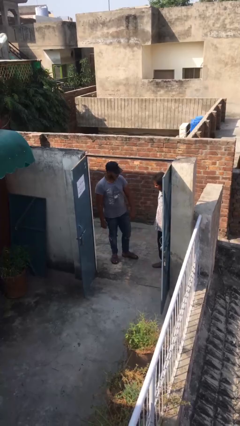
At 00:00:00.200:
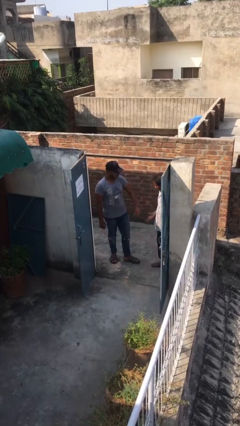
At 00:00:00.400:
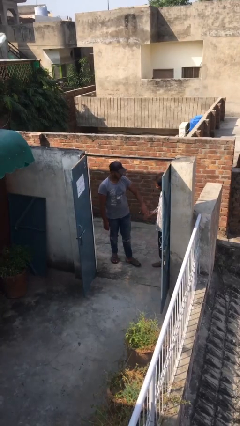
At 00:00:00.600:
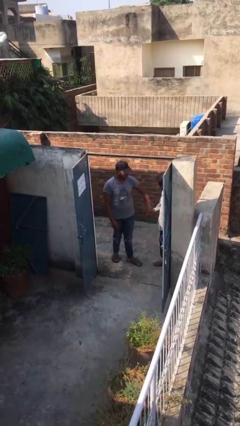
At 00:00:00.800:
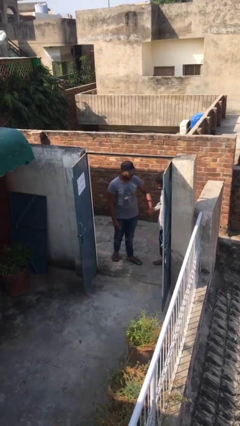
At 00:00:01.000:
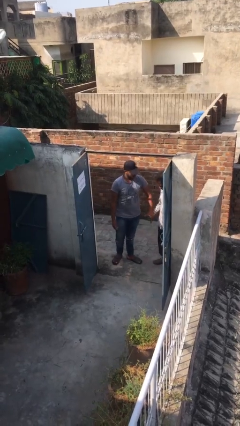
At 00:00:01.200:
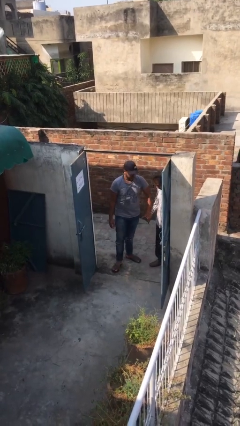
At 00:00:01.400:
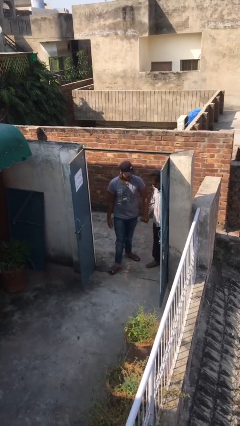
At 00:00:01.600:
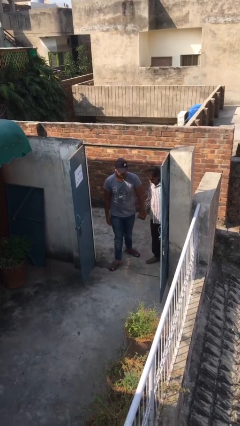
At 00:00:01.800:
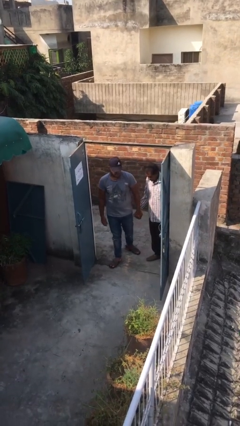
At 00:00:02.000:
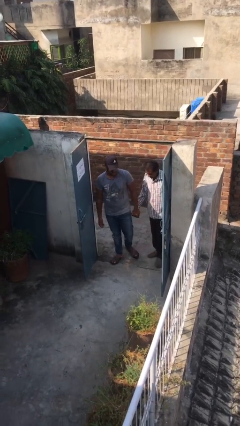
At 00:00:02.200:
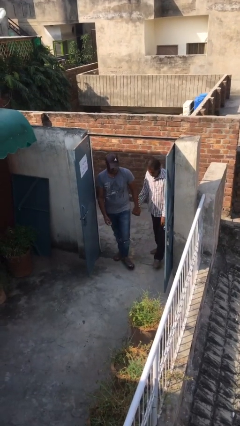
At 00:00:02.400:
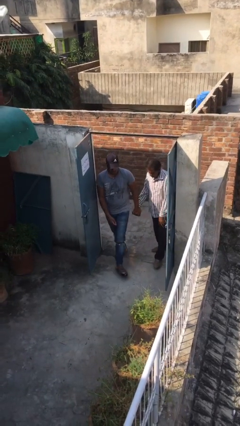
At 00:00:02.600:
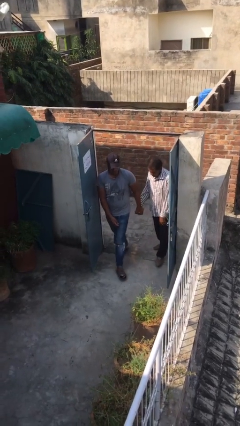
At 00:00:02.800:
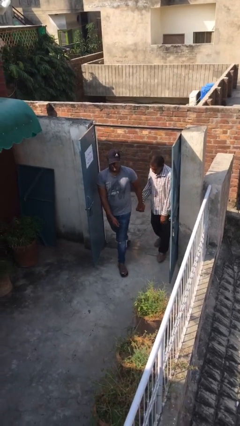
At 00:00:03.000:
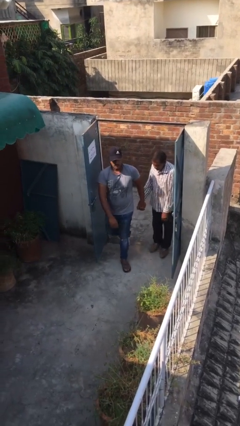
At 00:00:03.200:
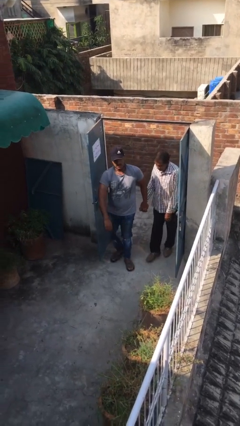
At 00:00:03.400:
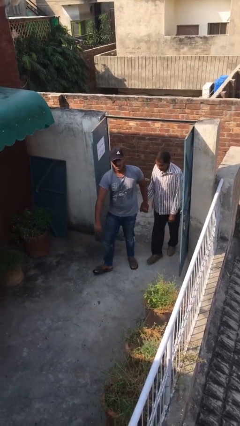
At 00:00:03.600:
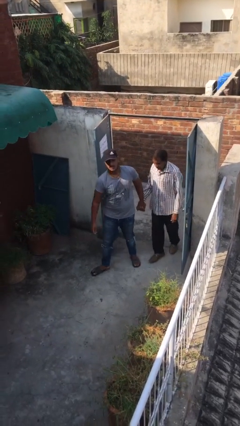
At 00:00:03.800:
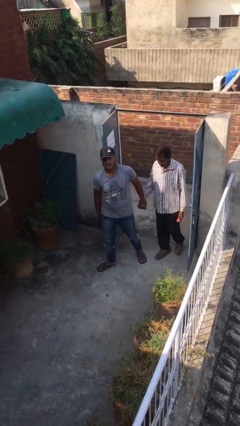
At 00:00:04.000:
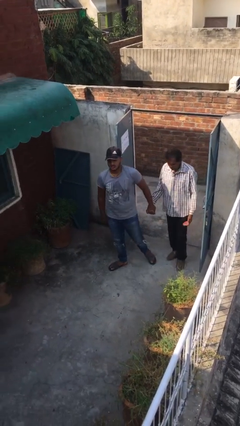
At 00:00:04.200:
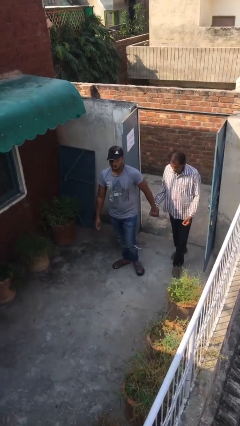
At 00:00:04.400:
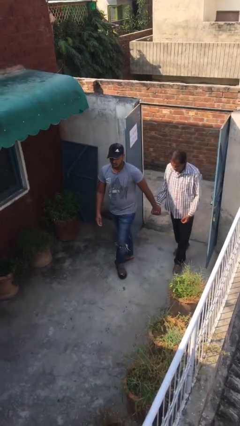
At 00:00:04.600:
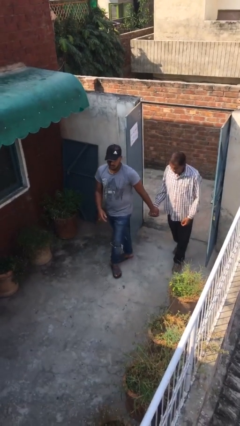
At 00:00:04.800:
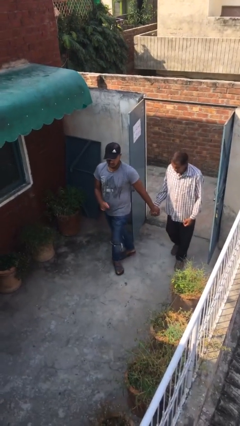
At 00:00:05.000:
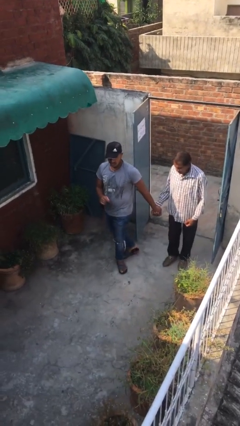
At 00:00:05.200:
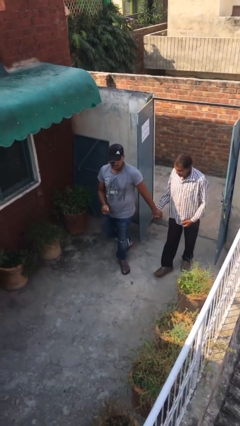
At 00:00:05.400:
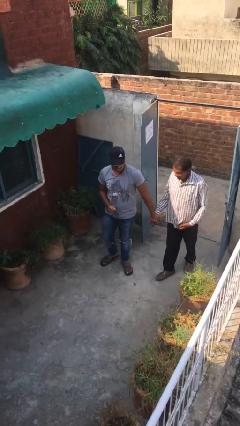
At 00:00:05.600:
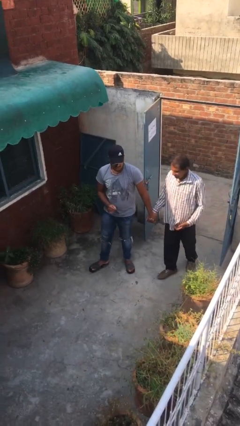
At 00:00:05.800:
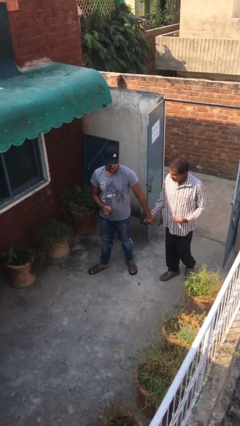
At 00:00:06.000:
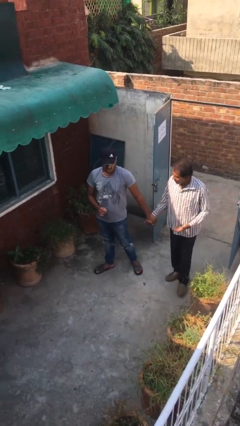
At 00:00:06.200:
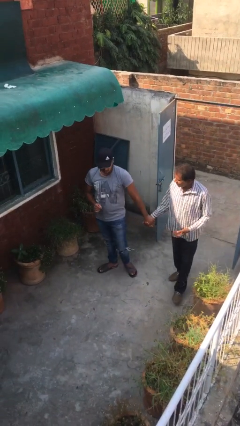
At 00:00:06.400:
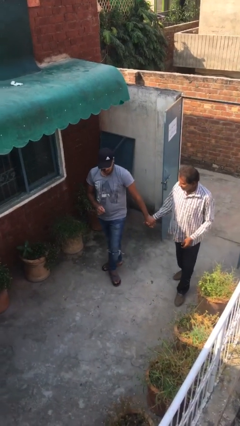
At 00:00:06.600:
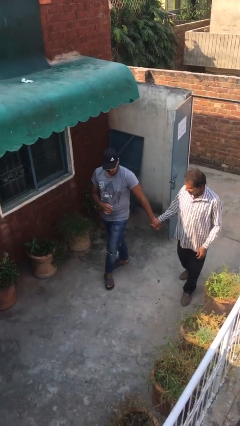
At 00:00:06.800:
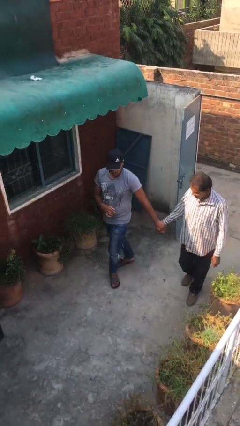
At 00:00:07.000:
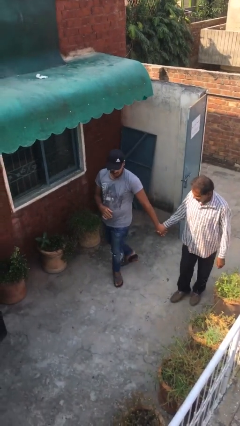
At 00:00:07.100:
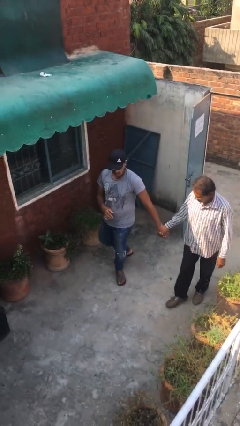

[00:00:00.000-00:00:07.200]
person holds hand

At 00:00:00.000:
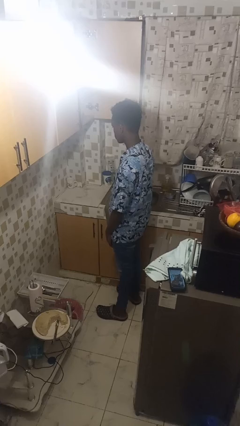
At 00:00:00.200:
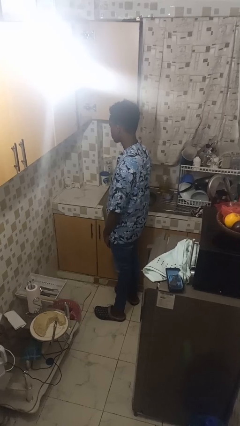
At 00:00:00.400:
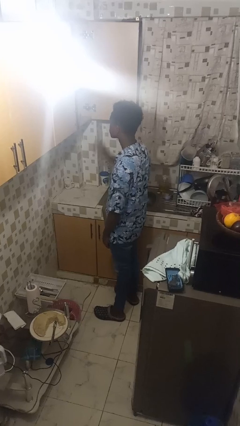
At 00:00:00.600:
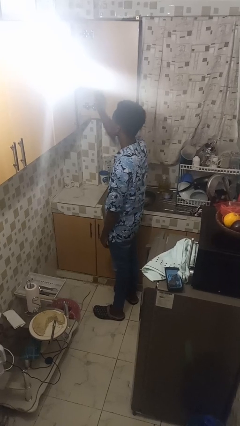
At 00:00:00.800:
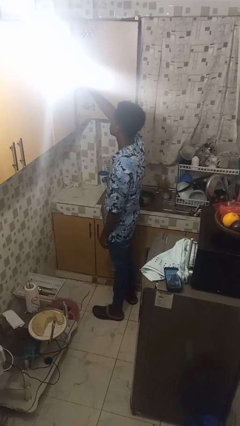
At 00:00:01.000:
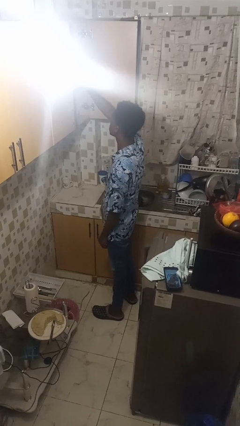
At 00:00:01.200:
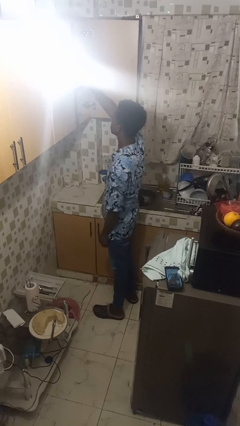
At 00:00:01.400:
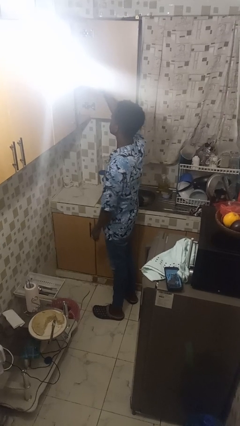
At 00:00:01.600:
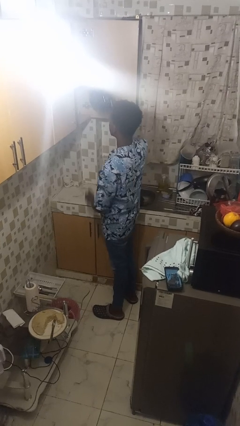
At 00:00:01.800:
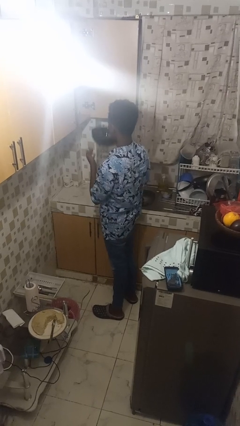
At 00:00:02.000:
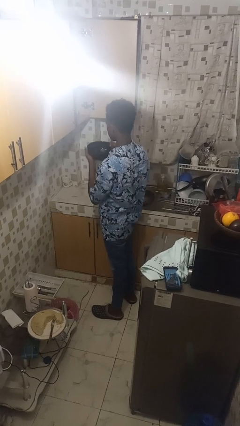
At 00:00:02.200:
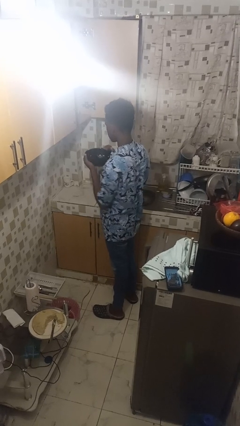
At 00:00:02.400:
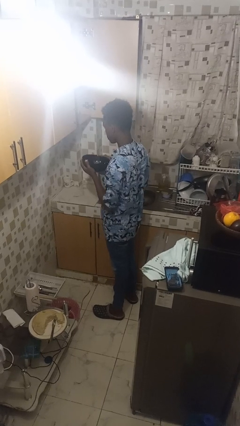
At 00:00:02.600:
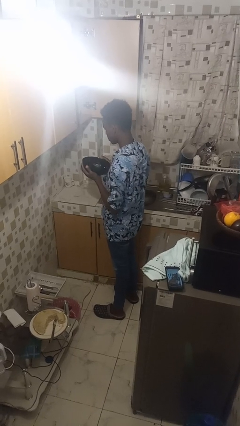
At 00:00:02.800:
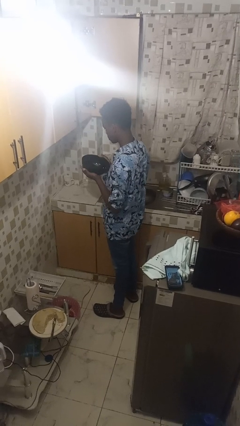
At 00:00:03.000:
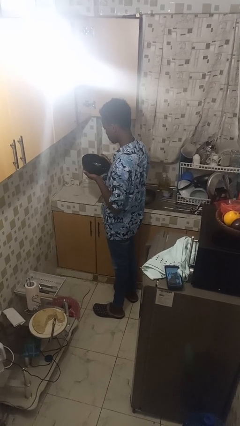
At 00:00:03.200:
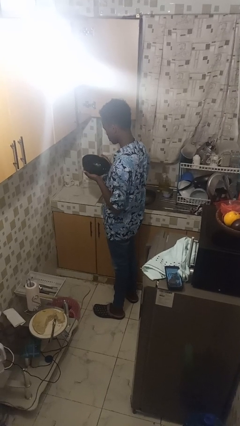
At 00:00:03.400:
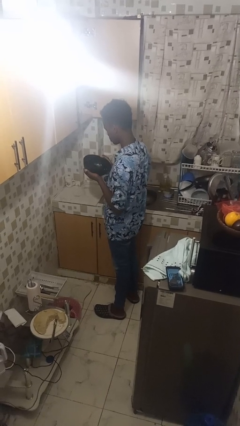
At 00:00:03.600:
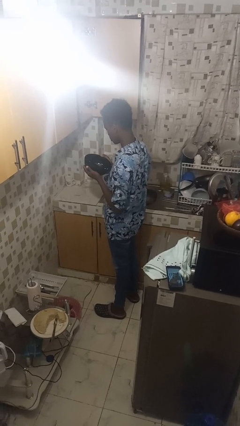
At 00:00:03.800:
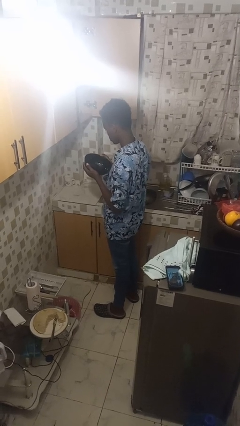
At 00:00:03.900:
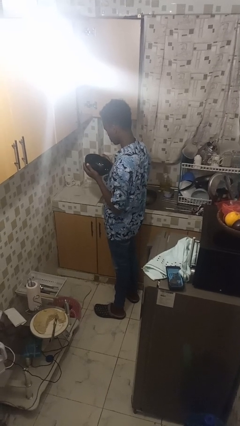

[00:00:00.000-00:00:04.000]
person picks up object from cabinet

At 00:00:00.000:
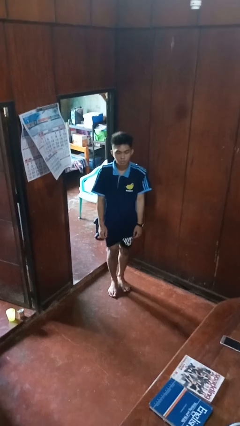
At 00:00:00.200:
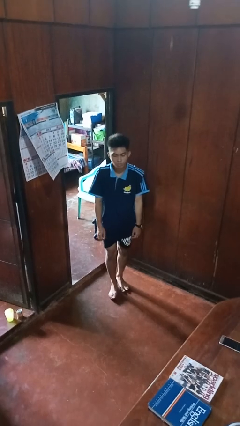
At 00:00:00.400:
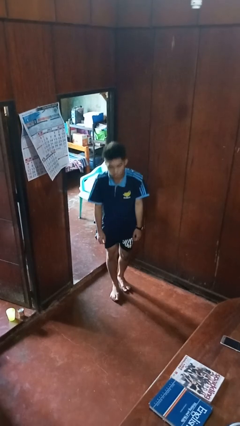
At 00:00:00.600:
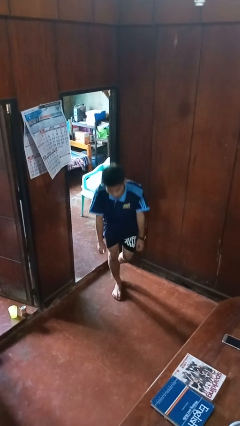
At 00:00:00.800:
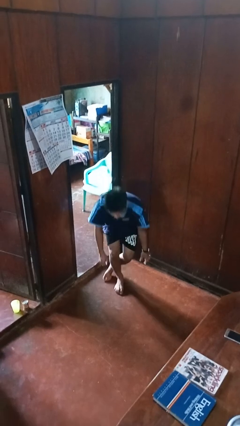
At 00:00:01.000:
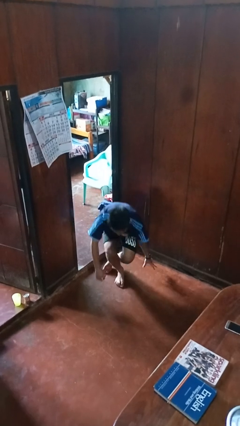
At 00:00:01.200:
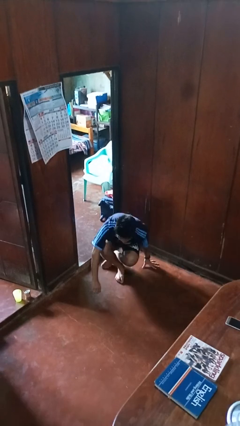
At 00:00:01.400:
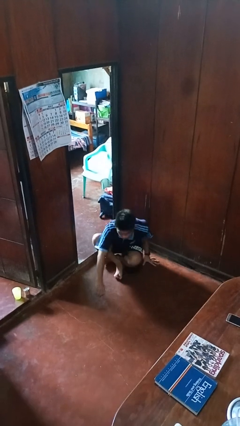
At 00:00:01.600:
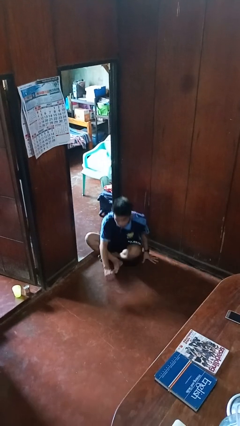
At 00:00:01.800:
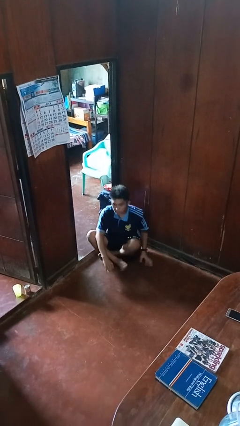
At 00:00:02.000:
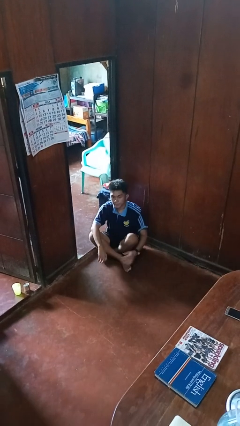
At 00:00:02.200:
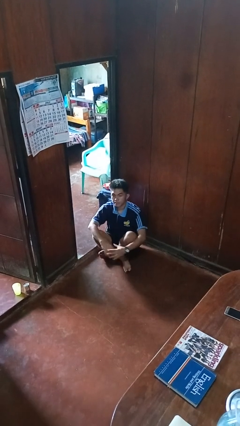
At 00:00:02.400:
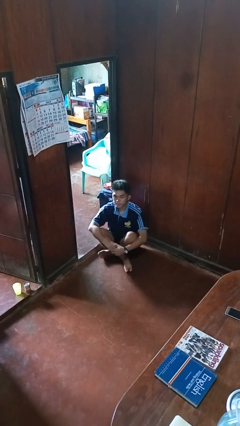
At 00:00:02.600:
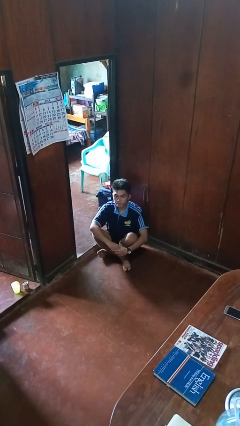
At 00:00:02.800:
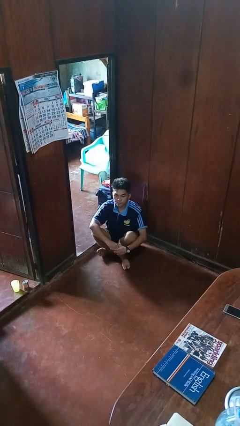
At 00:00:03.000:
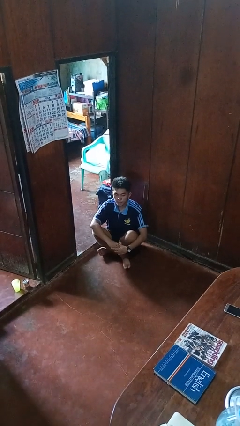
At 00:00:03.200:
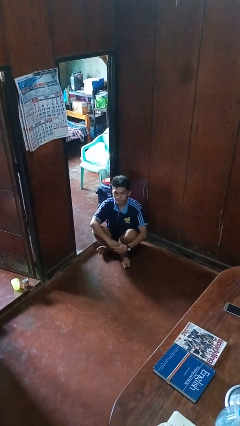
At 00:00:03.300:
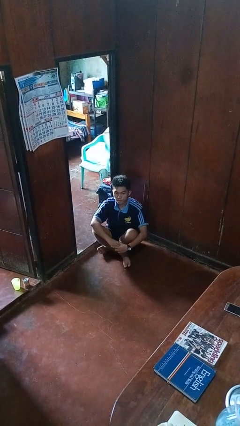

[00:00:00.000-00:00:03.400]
person sits crisscross

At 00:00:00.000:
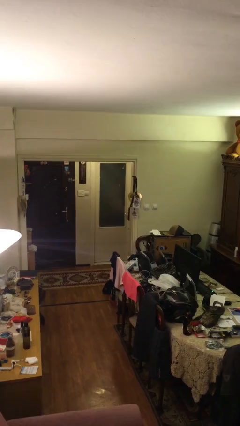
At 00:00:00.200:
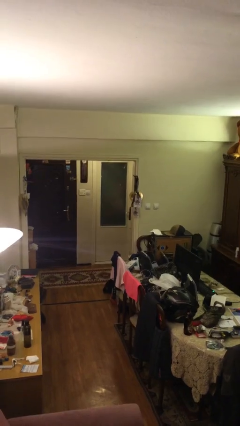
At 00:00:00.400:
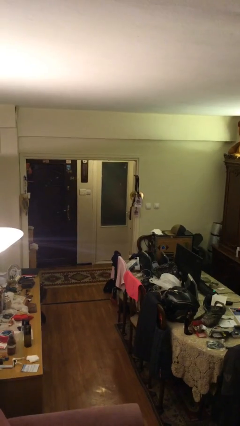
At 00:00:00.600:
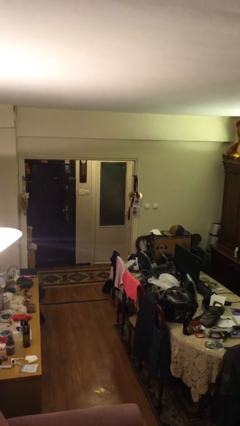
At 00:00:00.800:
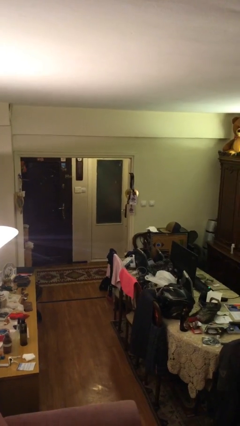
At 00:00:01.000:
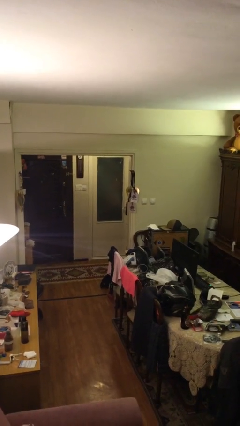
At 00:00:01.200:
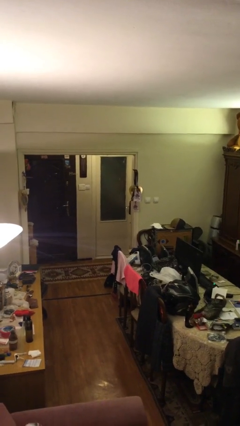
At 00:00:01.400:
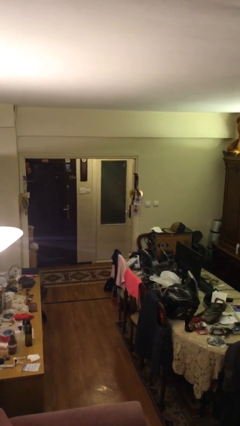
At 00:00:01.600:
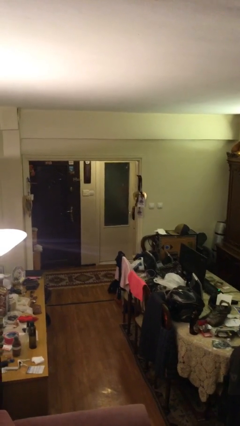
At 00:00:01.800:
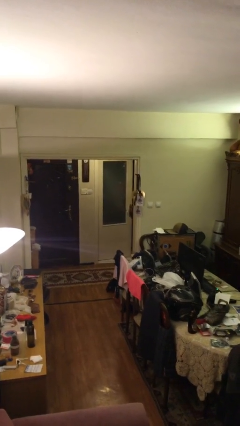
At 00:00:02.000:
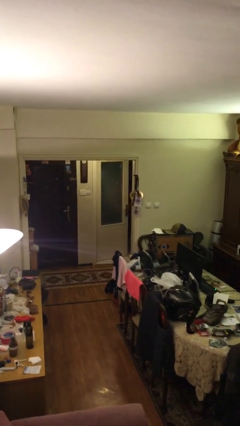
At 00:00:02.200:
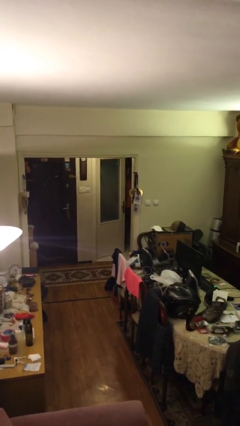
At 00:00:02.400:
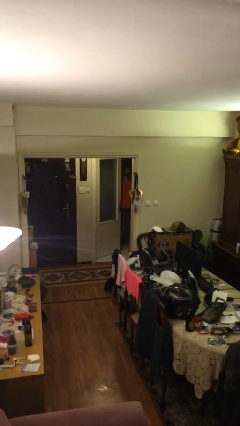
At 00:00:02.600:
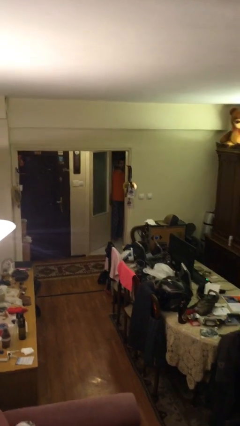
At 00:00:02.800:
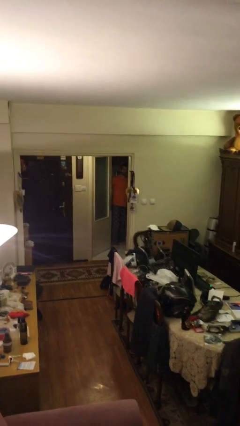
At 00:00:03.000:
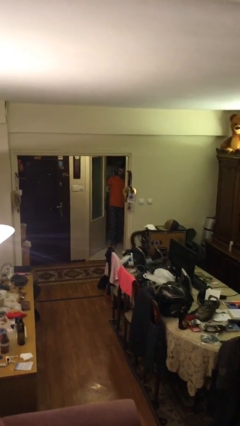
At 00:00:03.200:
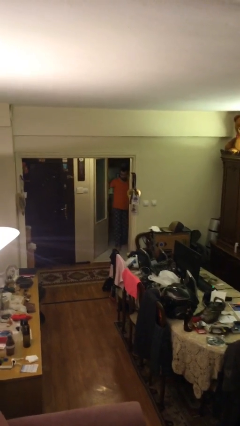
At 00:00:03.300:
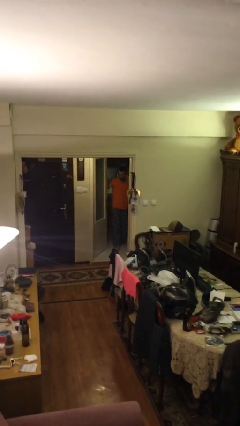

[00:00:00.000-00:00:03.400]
person opens facility door
